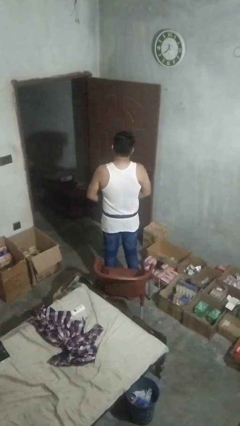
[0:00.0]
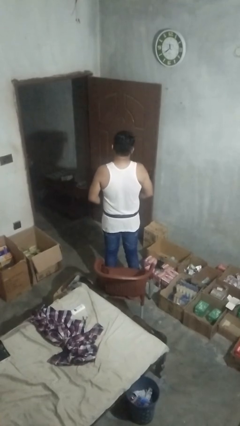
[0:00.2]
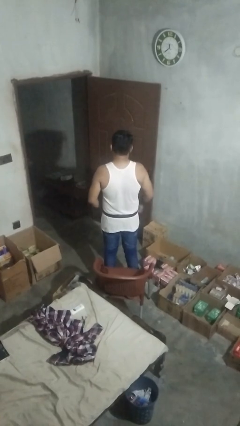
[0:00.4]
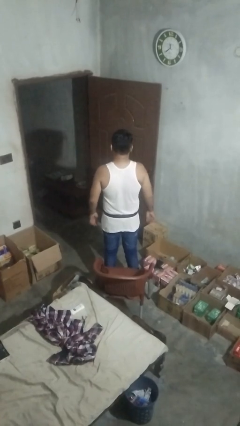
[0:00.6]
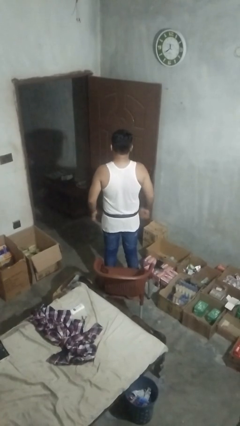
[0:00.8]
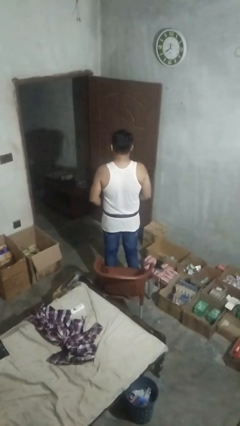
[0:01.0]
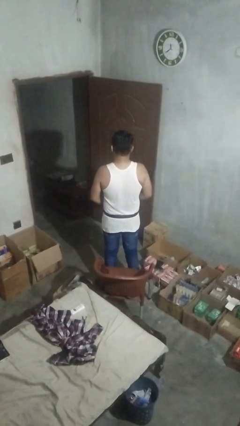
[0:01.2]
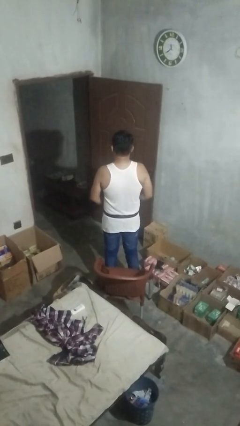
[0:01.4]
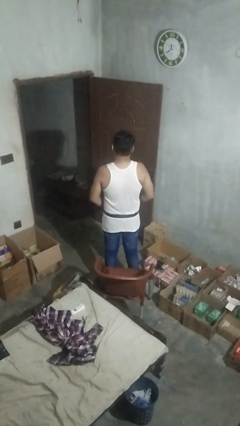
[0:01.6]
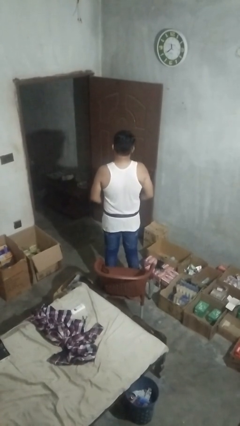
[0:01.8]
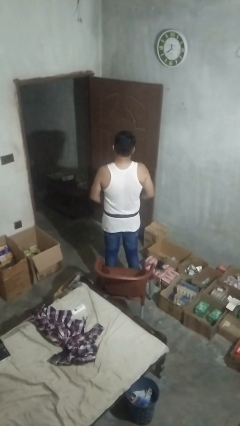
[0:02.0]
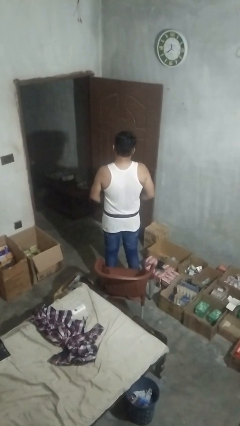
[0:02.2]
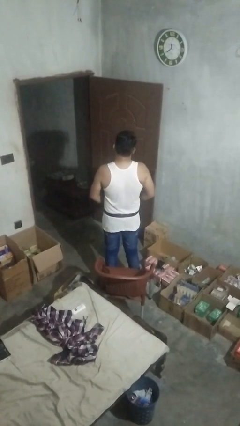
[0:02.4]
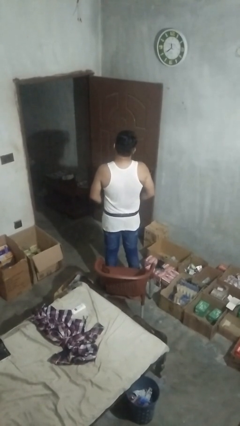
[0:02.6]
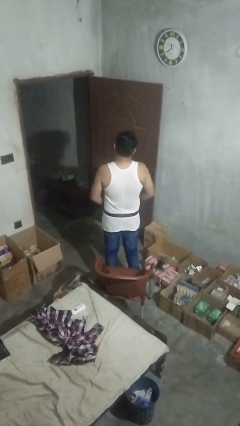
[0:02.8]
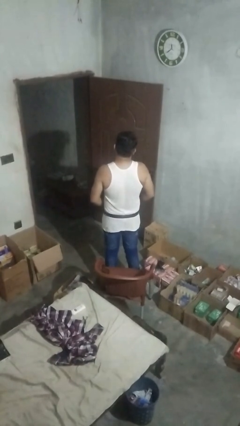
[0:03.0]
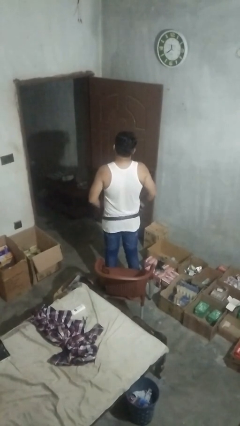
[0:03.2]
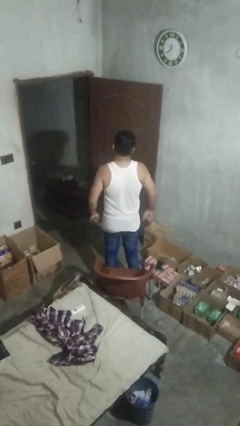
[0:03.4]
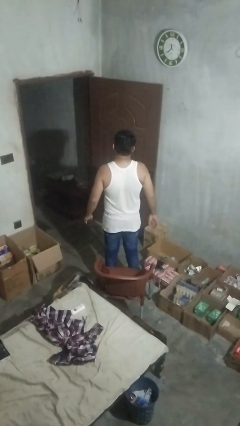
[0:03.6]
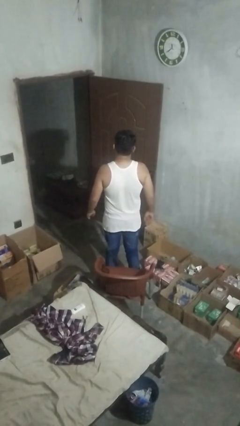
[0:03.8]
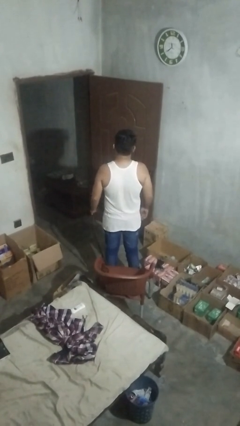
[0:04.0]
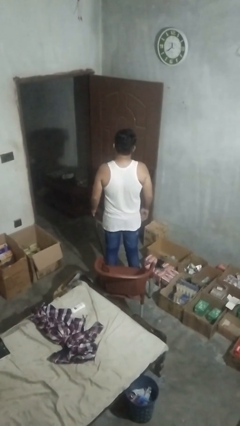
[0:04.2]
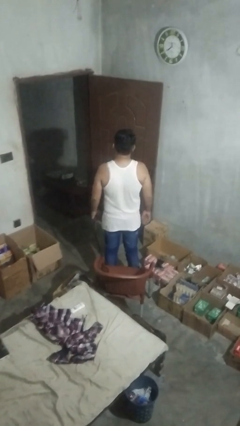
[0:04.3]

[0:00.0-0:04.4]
person takes off belt

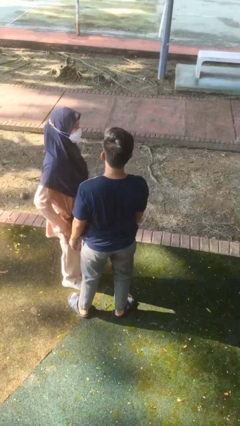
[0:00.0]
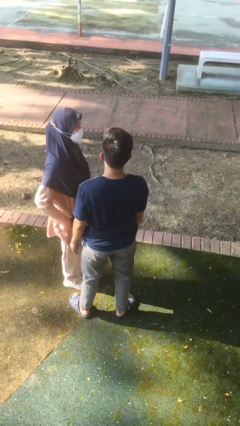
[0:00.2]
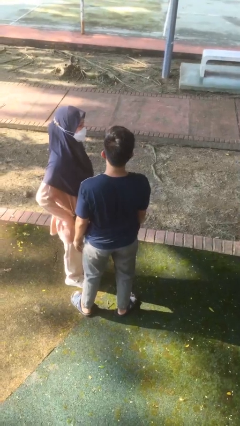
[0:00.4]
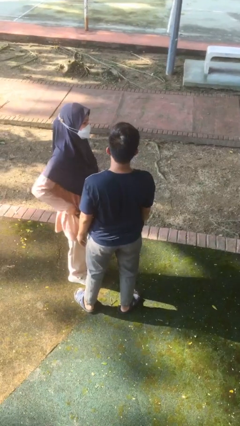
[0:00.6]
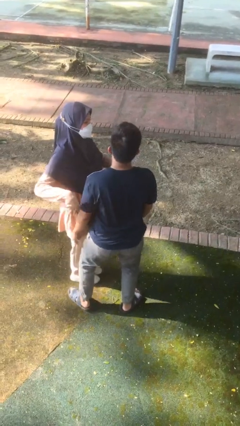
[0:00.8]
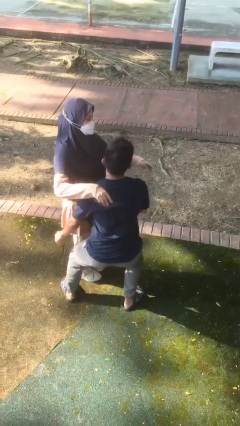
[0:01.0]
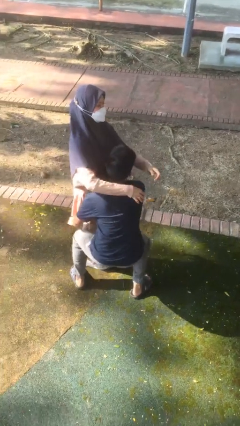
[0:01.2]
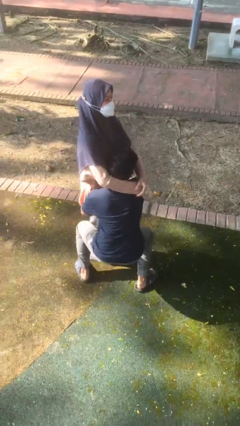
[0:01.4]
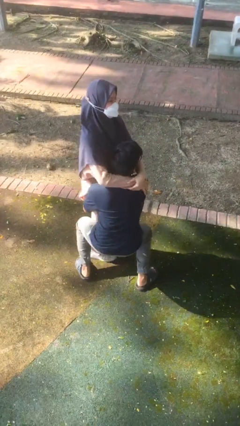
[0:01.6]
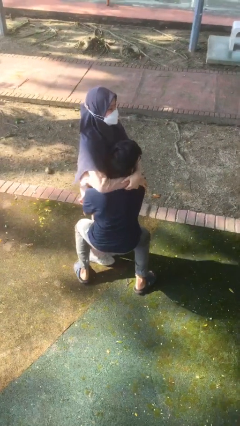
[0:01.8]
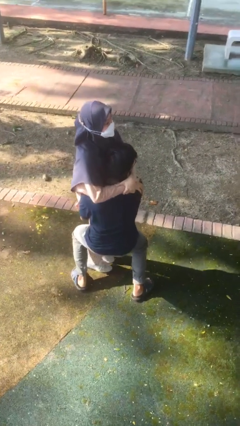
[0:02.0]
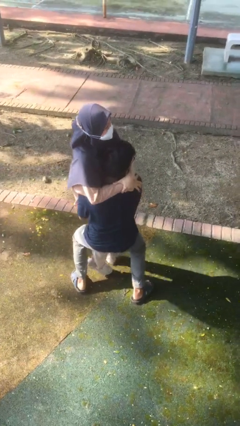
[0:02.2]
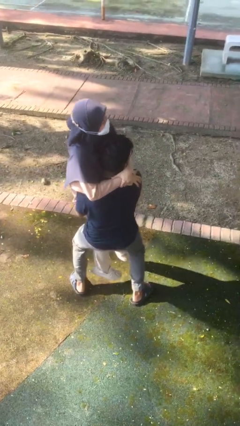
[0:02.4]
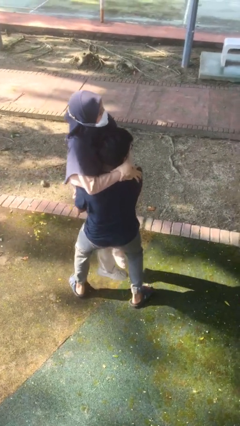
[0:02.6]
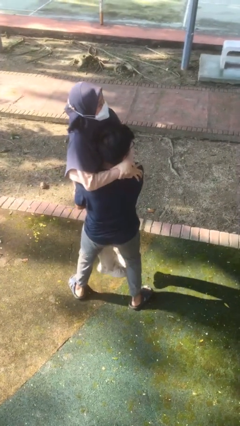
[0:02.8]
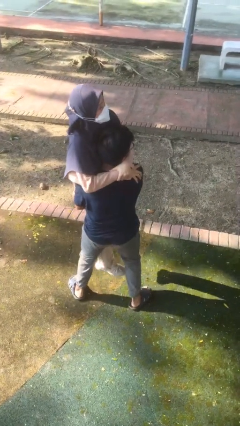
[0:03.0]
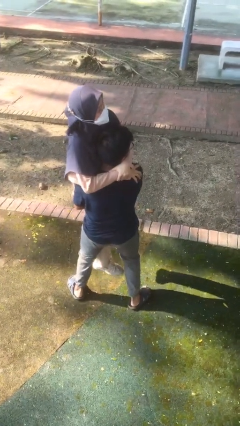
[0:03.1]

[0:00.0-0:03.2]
person picks up person

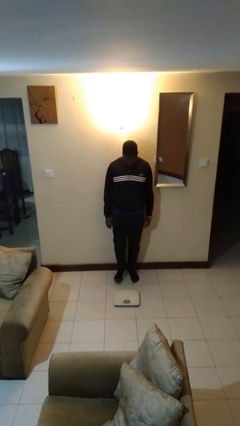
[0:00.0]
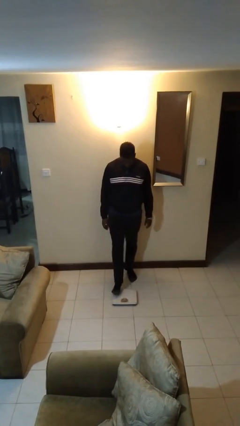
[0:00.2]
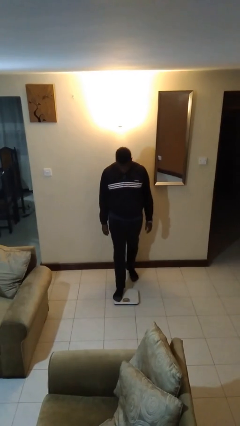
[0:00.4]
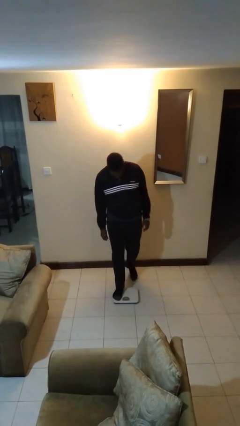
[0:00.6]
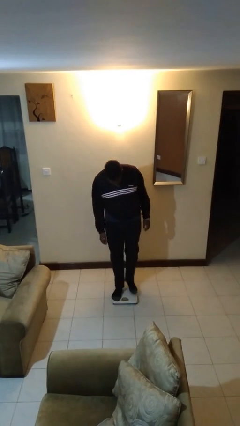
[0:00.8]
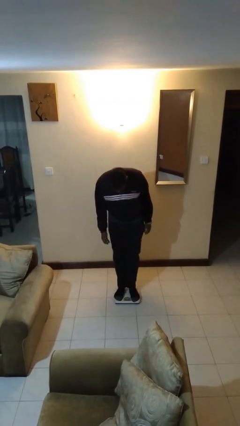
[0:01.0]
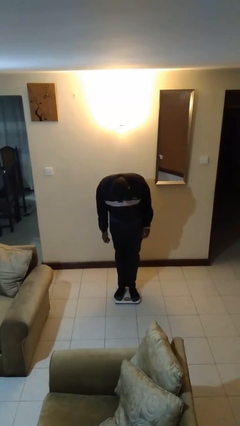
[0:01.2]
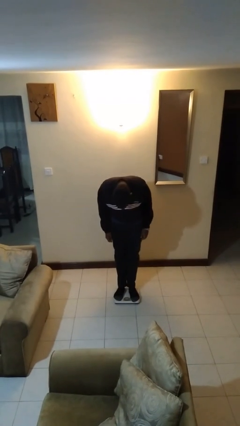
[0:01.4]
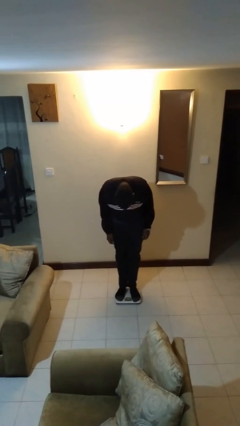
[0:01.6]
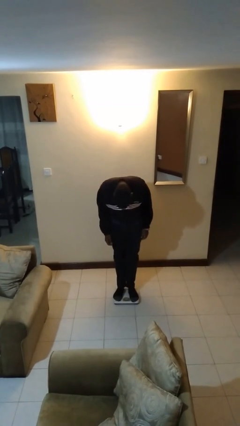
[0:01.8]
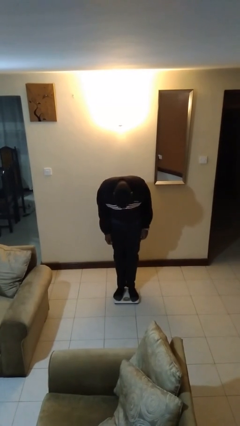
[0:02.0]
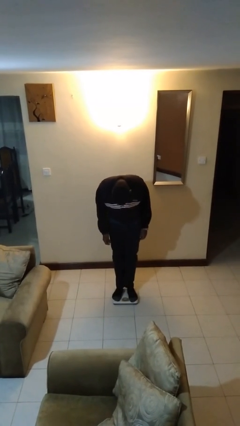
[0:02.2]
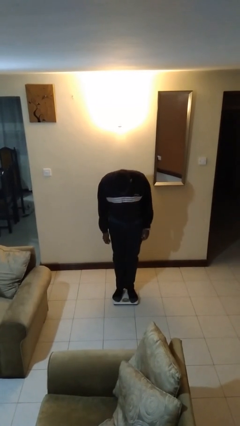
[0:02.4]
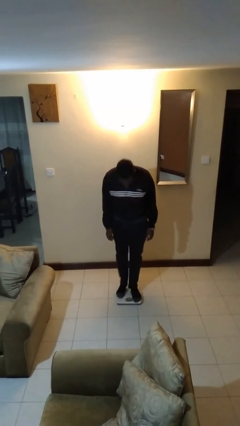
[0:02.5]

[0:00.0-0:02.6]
person uses bodyweight scale

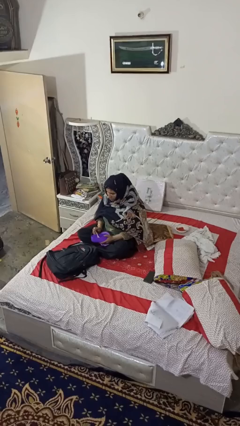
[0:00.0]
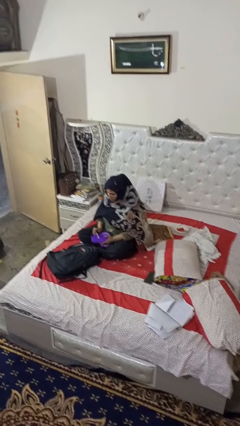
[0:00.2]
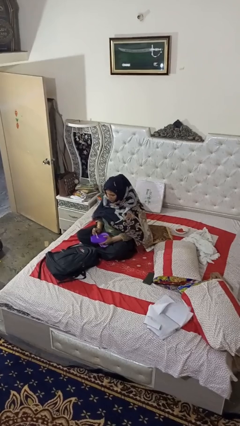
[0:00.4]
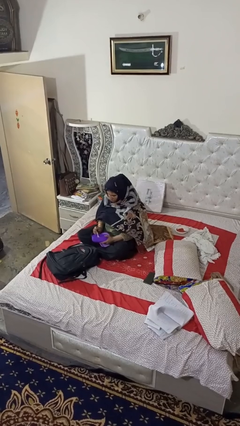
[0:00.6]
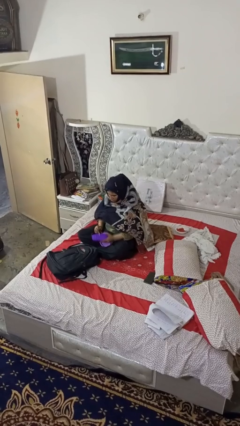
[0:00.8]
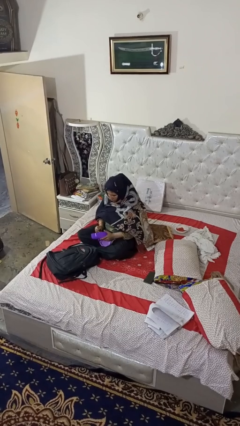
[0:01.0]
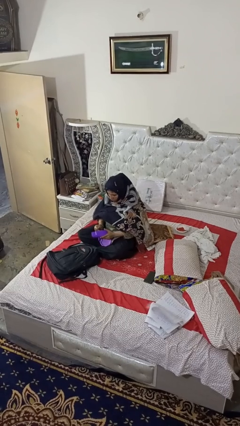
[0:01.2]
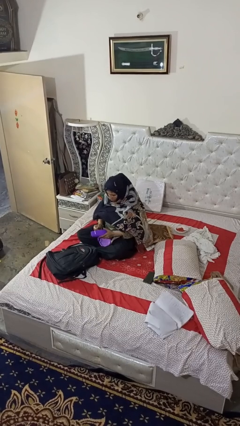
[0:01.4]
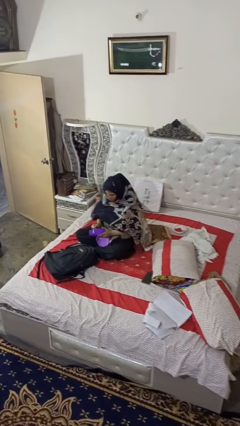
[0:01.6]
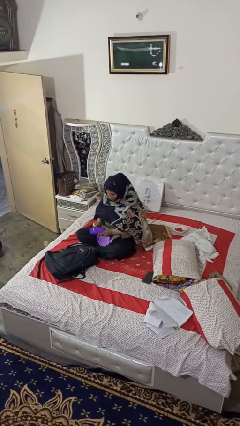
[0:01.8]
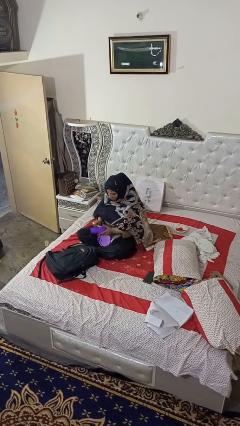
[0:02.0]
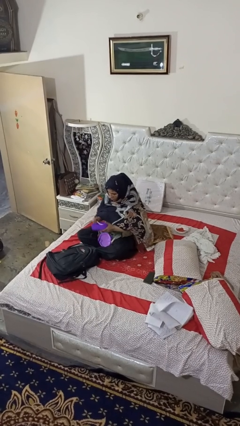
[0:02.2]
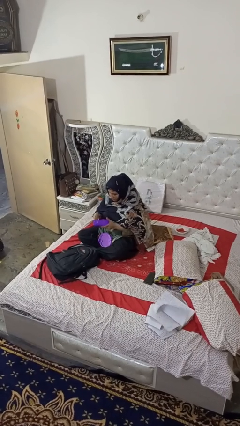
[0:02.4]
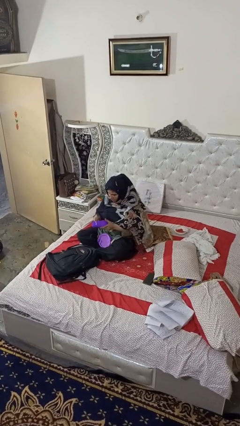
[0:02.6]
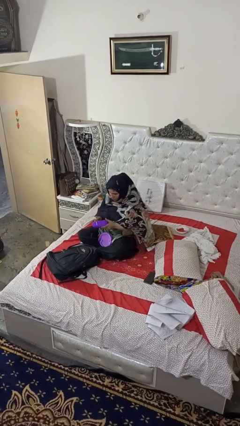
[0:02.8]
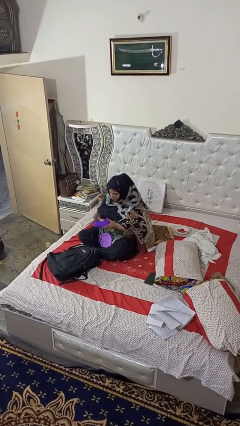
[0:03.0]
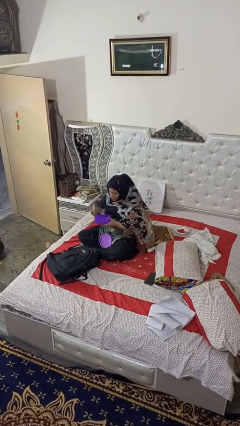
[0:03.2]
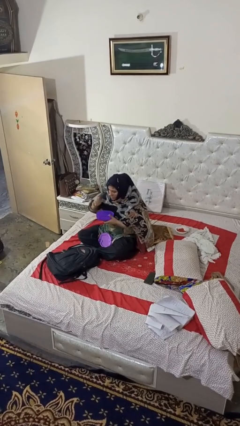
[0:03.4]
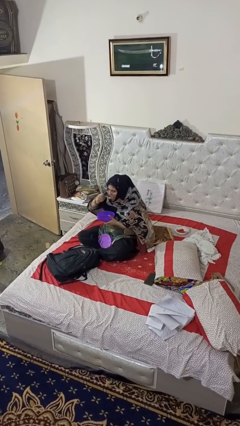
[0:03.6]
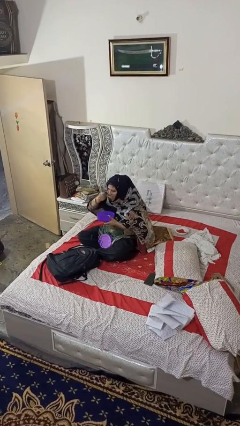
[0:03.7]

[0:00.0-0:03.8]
person eats snack from bag

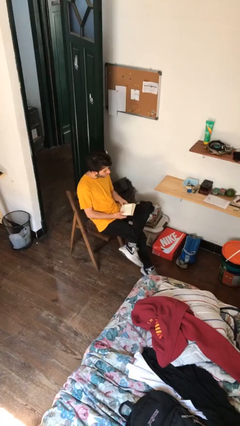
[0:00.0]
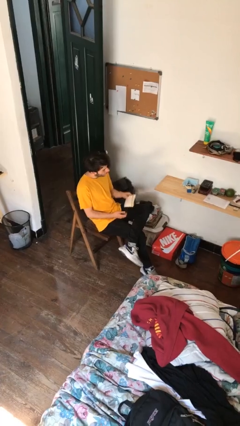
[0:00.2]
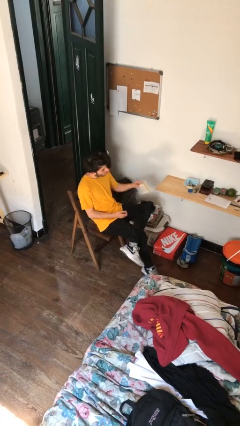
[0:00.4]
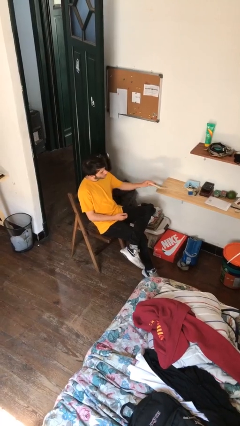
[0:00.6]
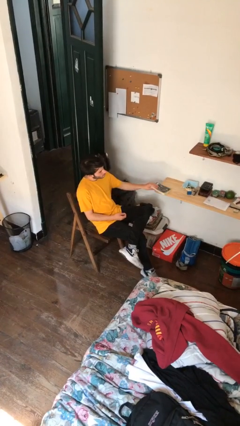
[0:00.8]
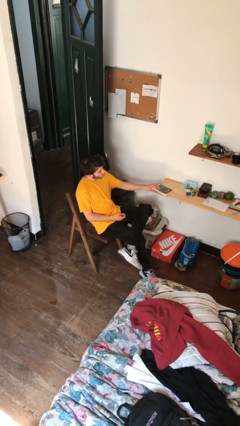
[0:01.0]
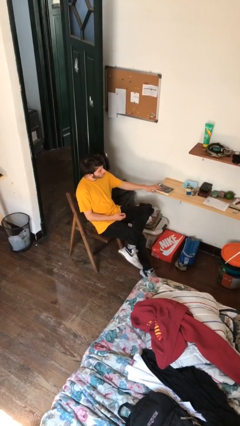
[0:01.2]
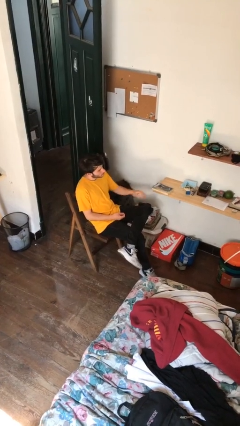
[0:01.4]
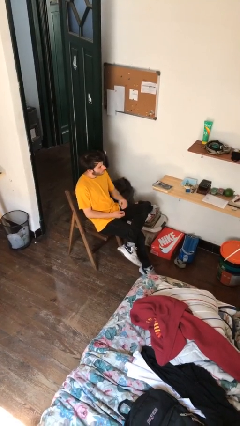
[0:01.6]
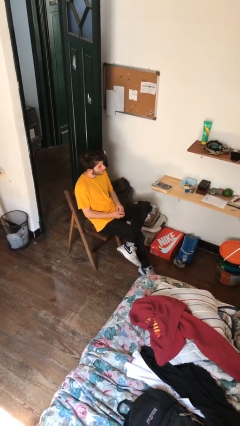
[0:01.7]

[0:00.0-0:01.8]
person puts down object on table

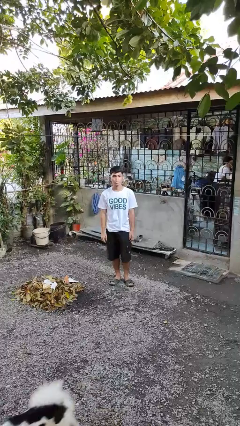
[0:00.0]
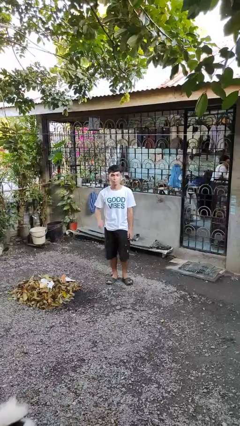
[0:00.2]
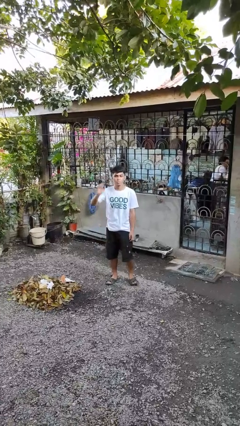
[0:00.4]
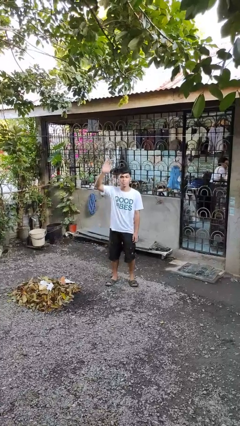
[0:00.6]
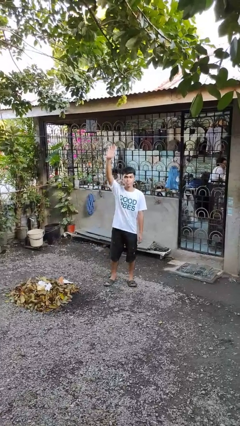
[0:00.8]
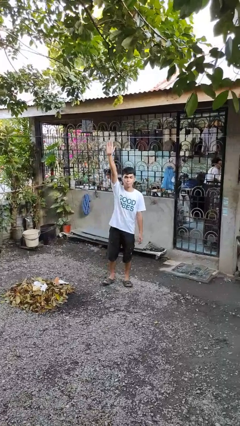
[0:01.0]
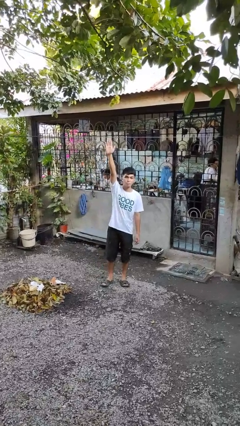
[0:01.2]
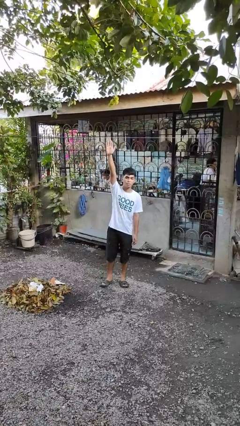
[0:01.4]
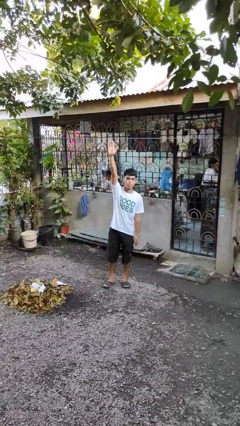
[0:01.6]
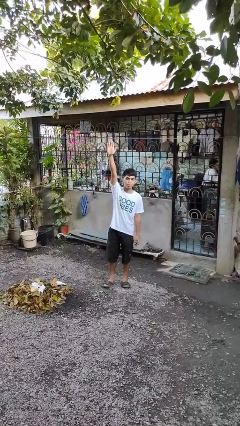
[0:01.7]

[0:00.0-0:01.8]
person gestures raise hand
